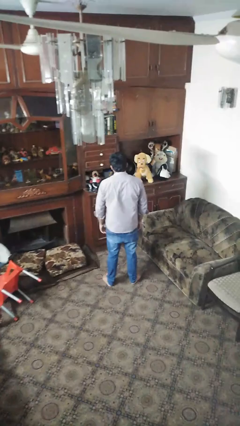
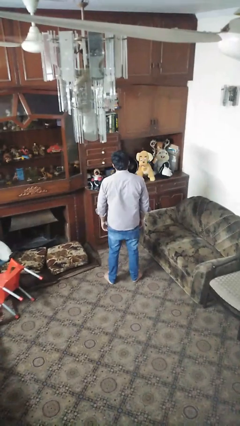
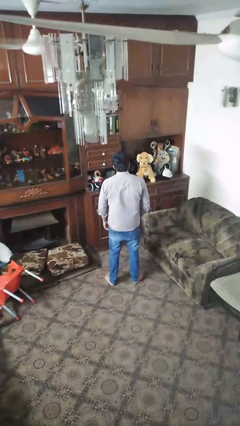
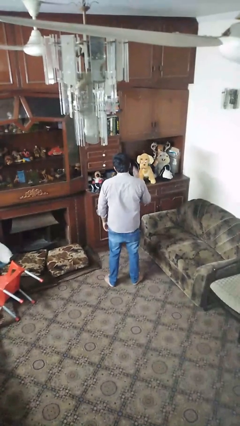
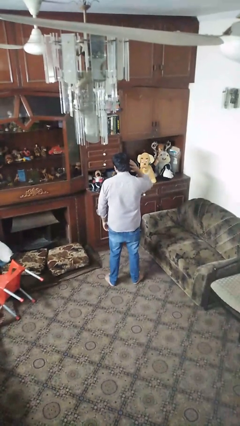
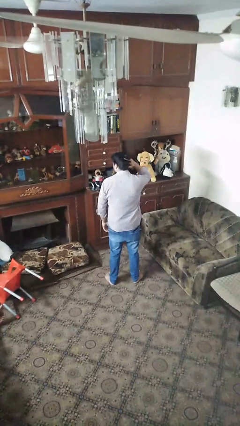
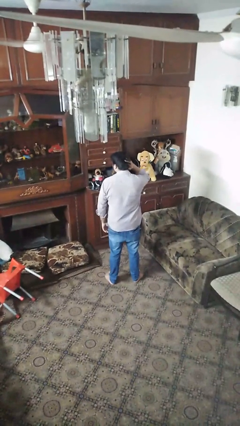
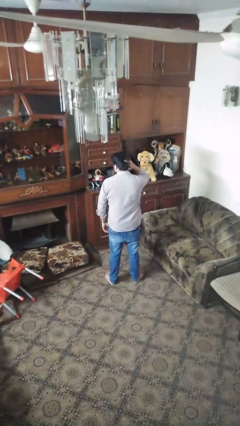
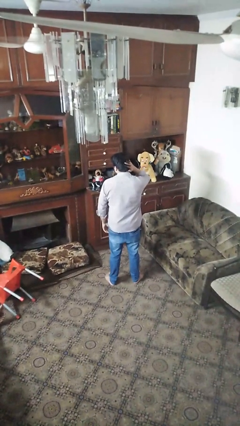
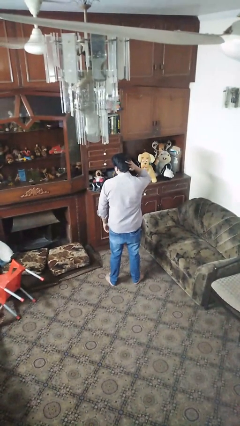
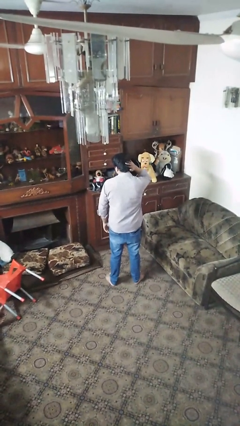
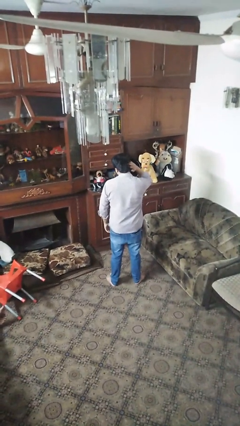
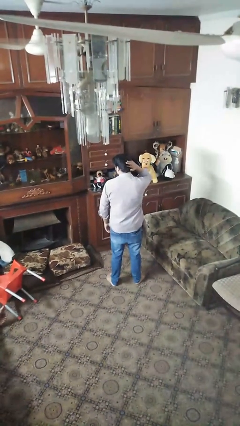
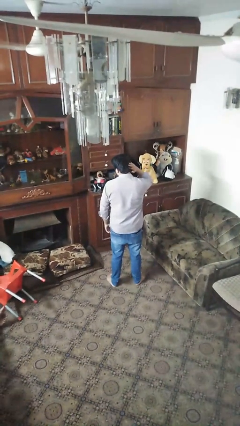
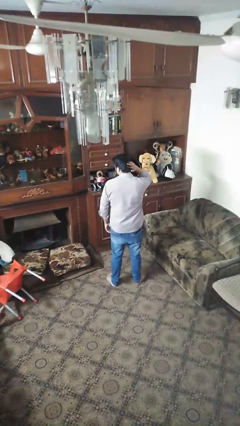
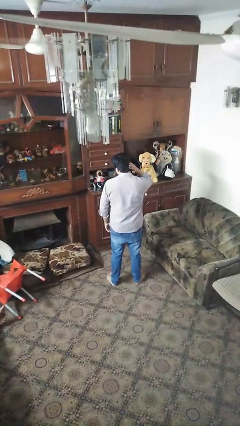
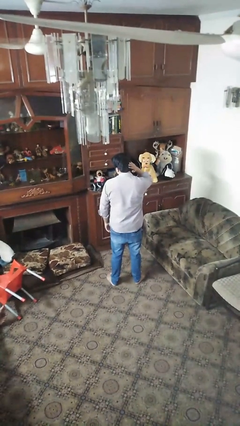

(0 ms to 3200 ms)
person strokes hair

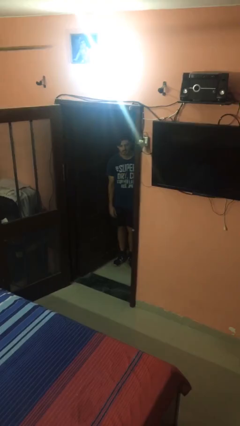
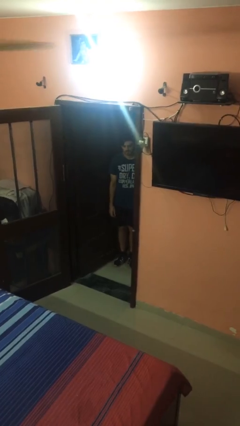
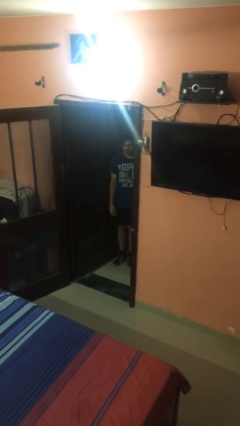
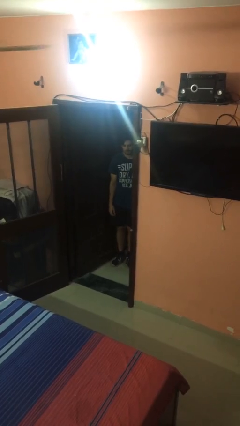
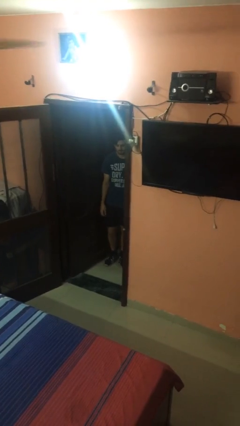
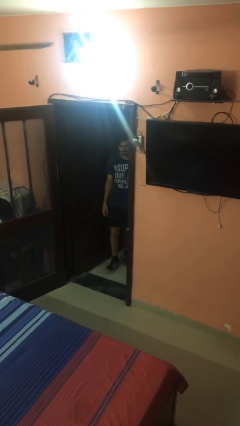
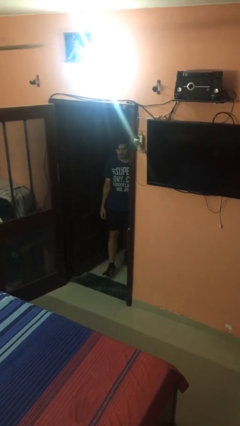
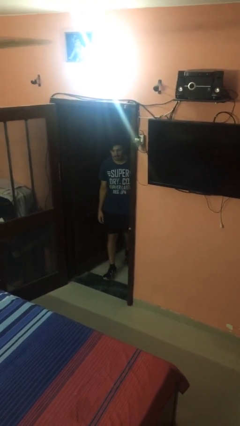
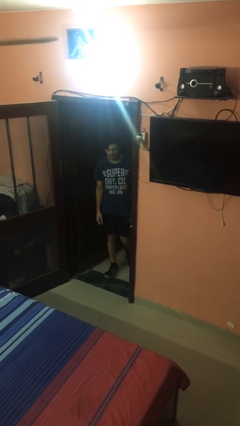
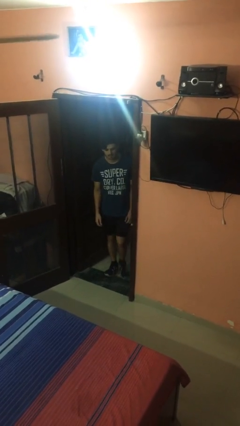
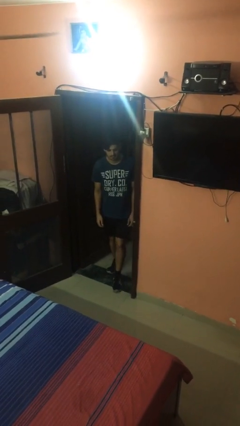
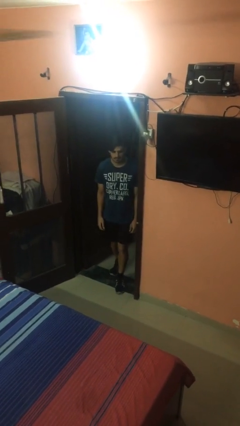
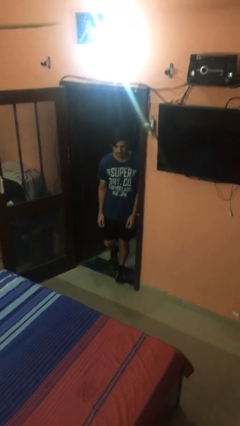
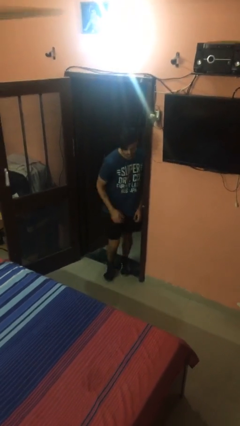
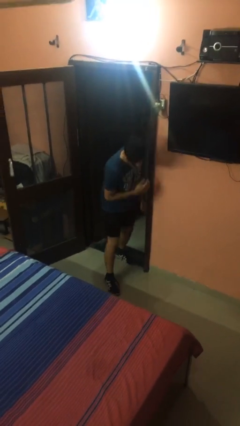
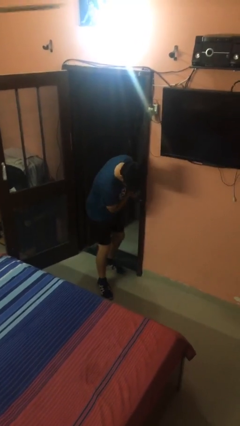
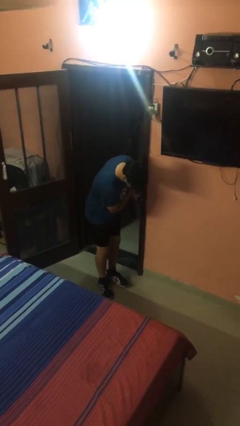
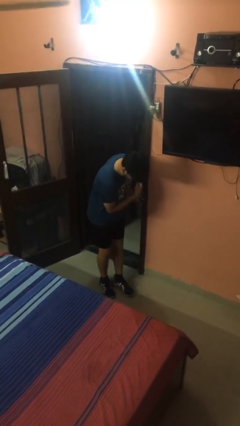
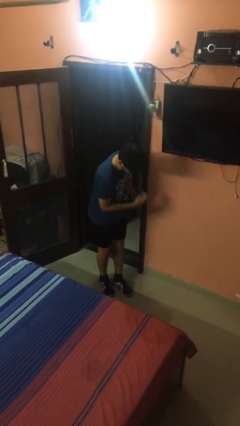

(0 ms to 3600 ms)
person bumps into wall

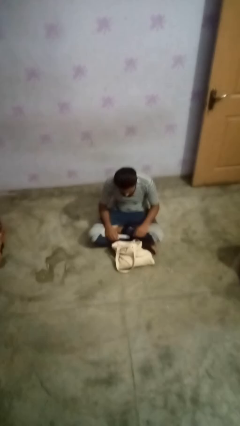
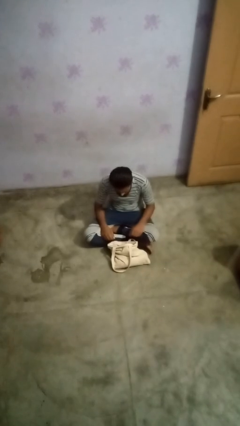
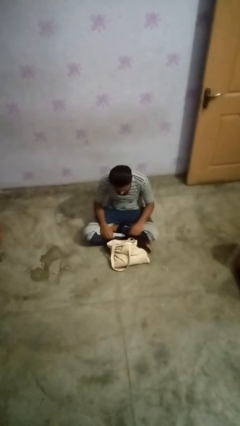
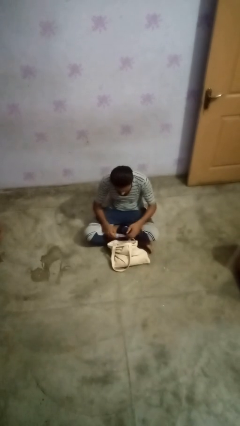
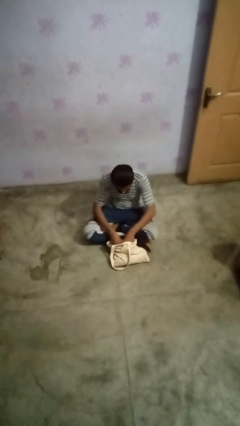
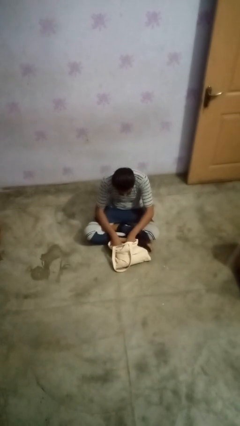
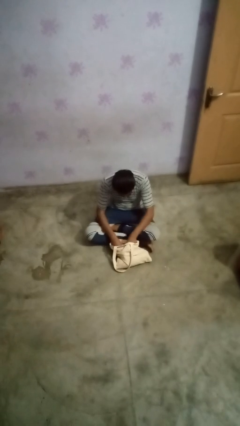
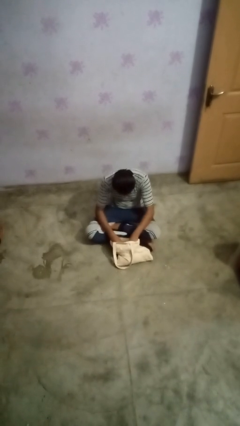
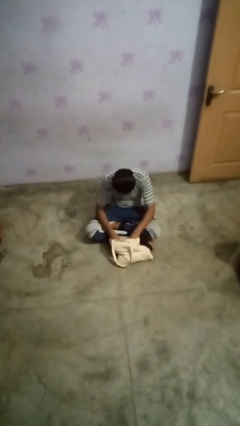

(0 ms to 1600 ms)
person searches in bag

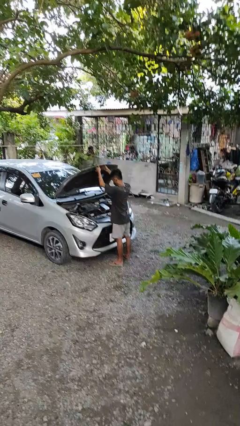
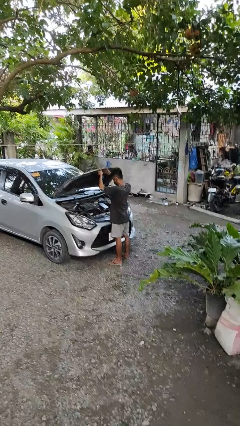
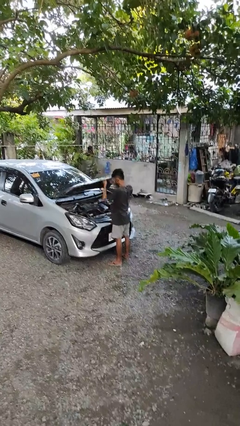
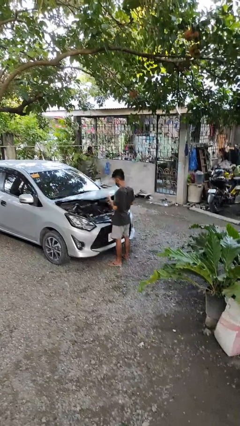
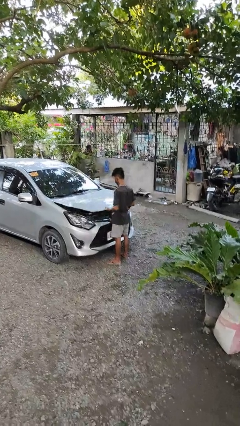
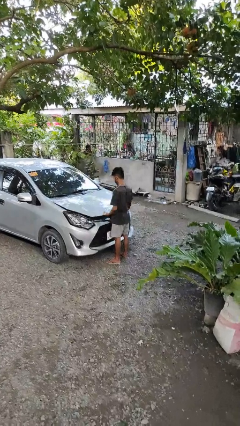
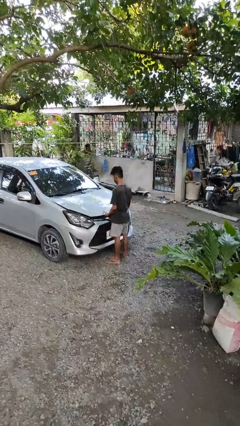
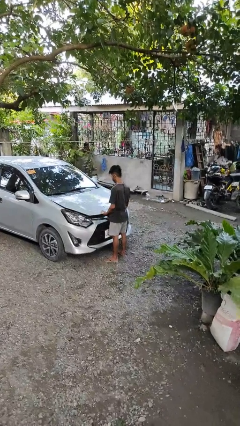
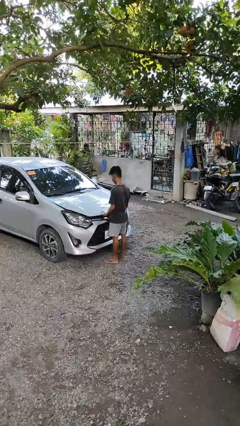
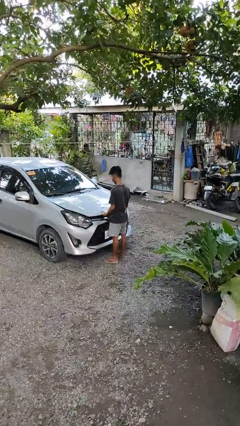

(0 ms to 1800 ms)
person closes car hood

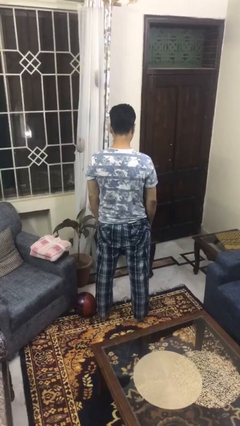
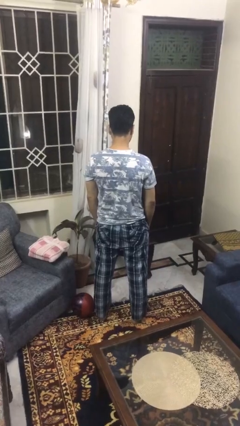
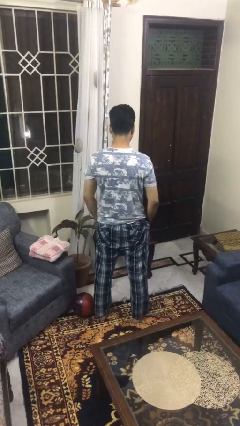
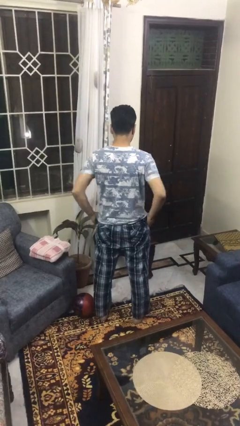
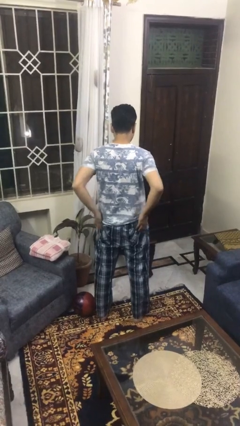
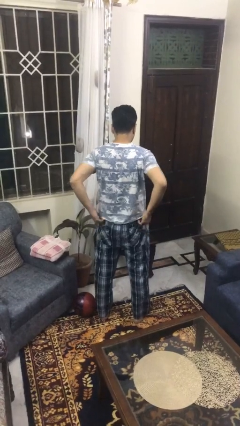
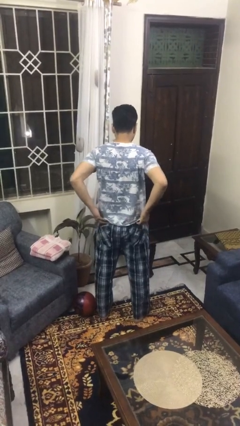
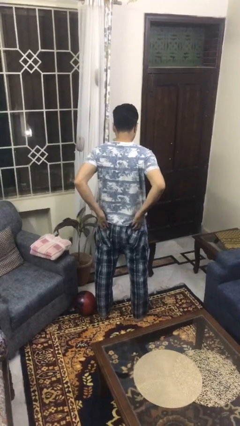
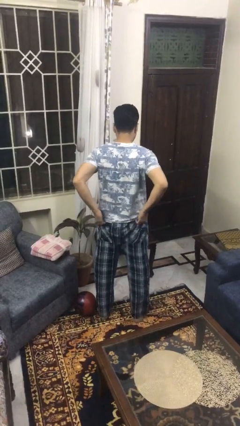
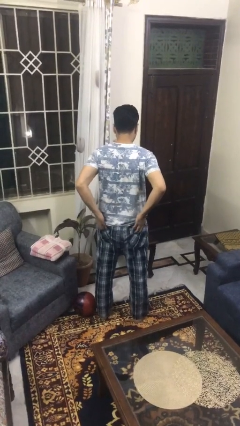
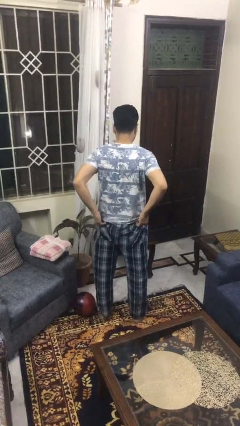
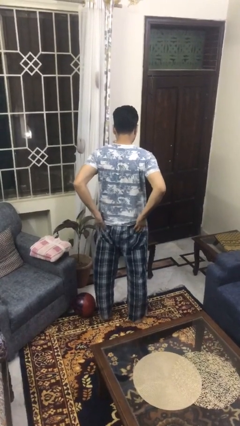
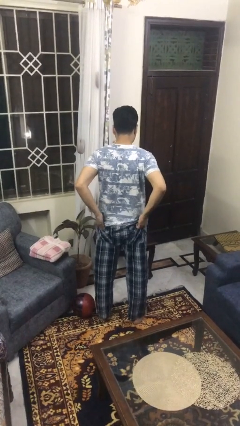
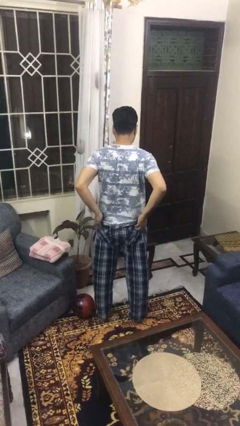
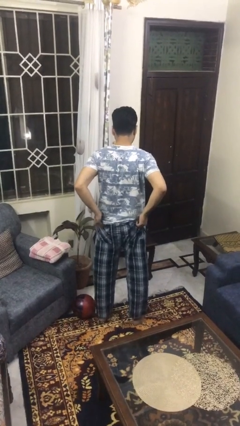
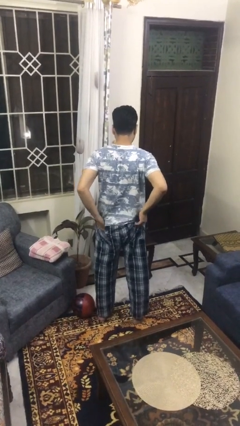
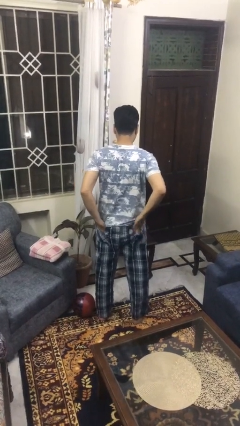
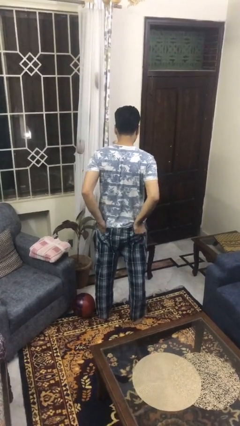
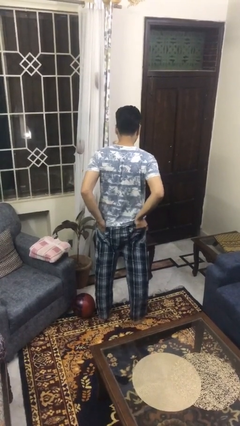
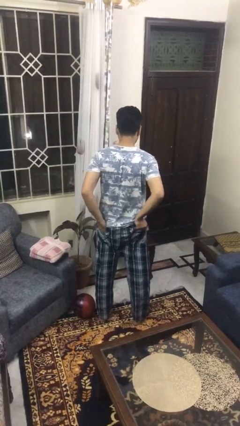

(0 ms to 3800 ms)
person puts hands in back pockets

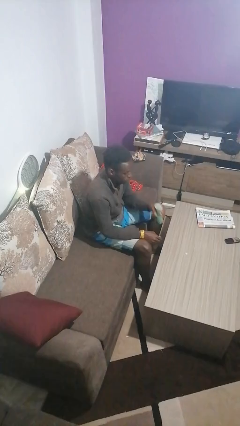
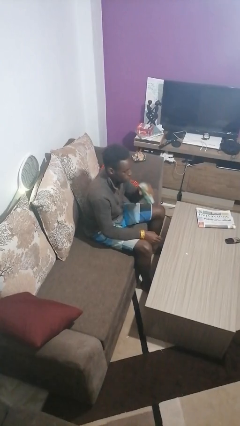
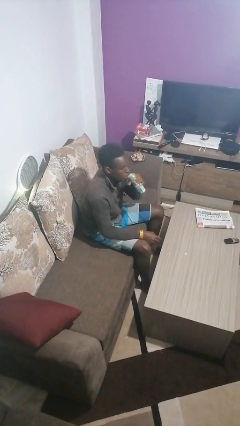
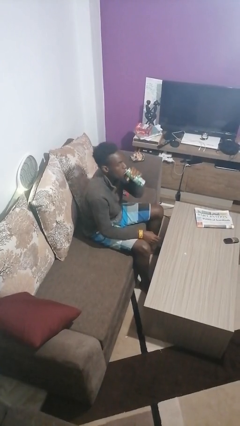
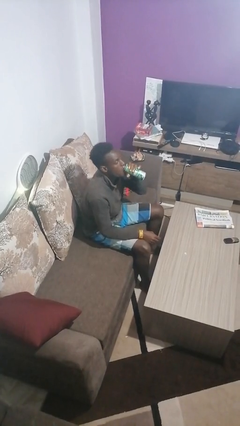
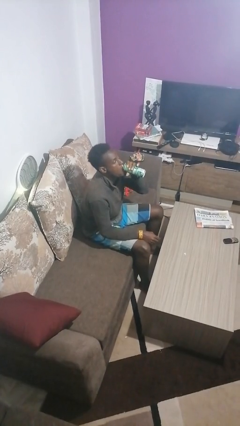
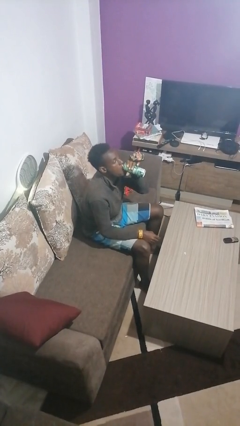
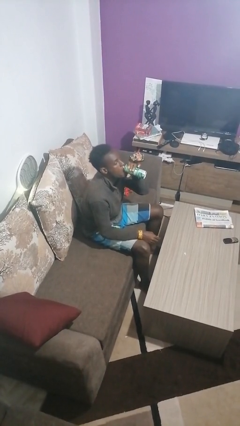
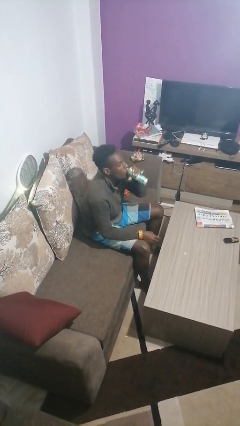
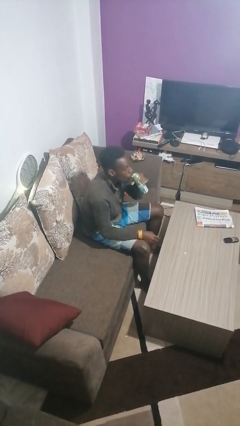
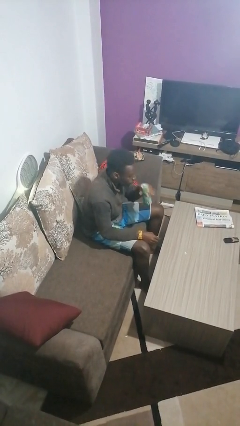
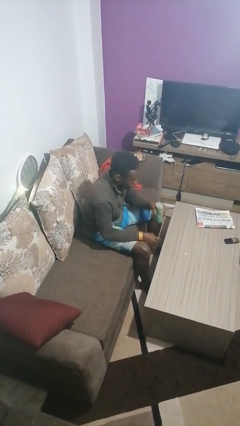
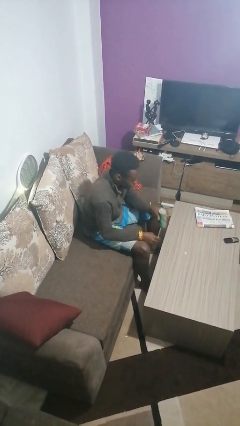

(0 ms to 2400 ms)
person drinks from beverage can

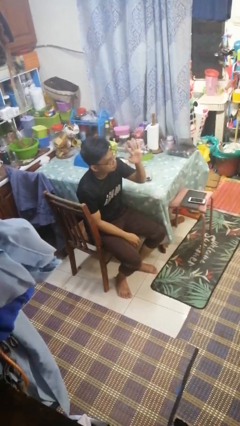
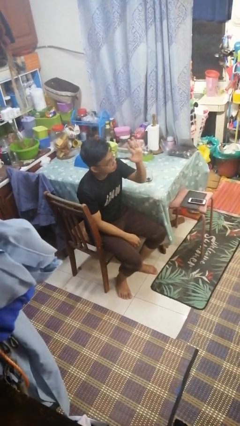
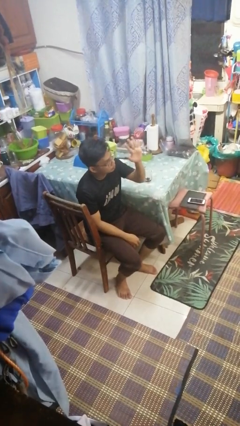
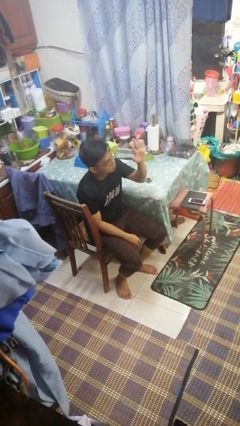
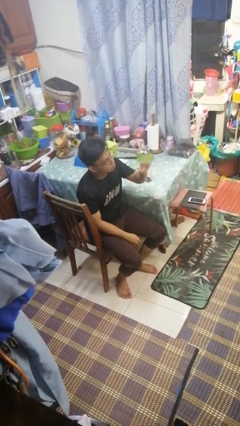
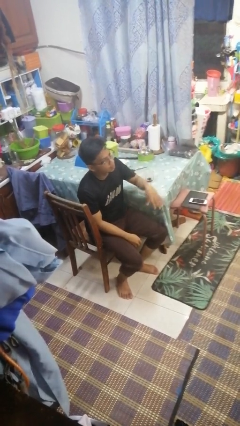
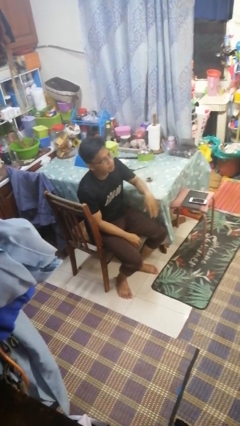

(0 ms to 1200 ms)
person gestures number five
